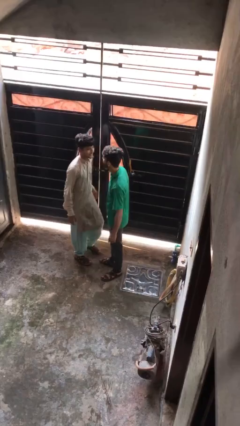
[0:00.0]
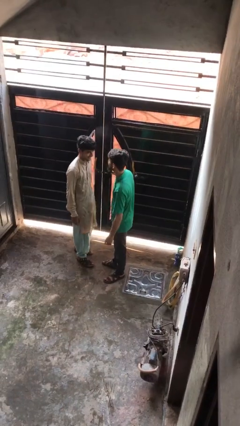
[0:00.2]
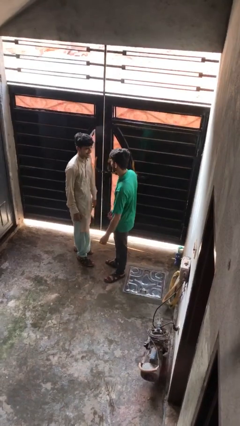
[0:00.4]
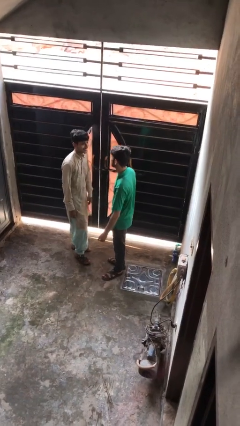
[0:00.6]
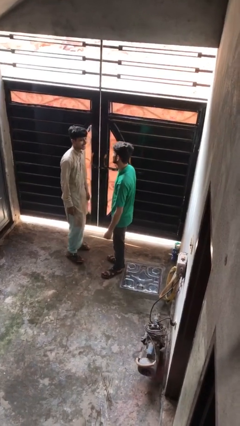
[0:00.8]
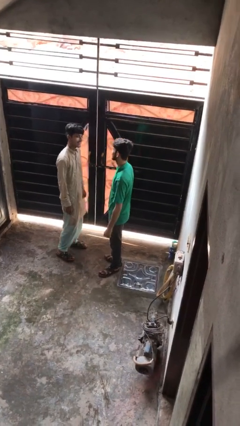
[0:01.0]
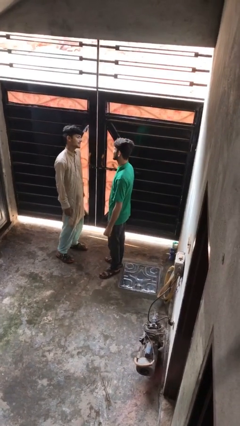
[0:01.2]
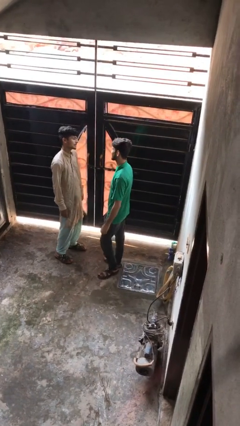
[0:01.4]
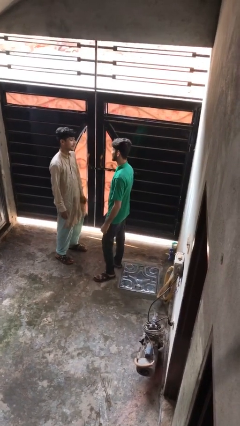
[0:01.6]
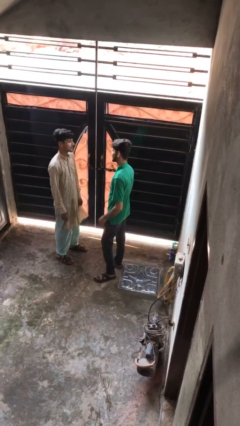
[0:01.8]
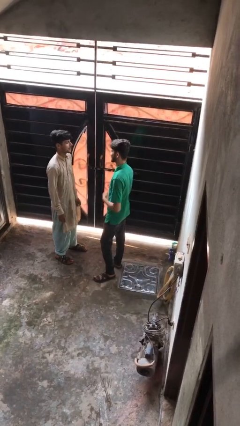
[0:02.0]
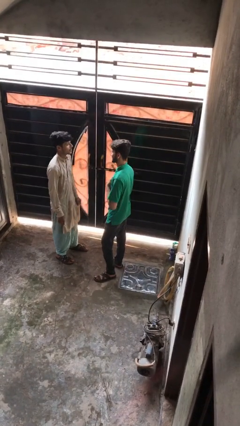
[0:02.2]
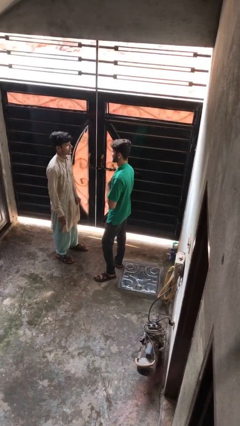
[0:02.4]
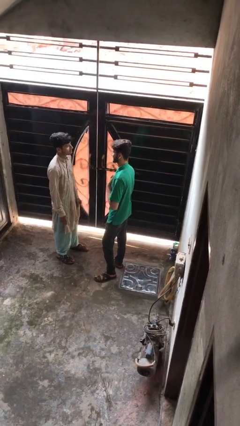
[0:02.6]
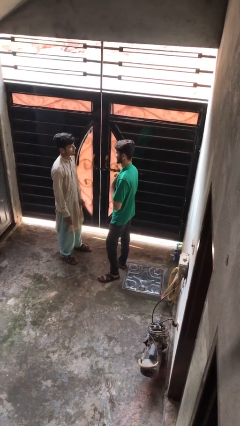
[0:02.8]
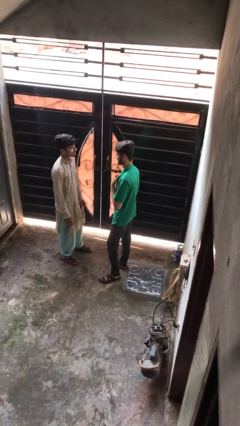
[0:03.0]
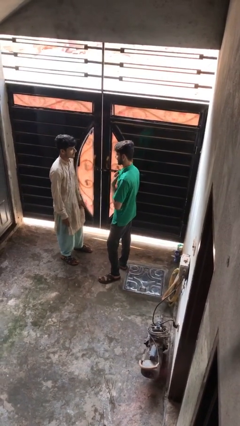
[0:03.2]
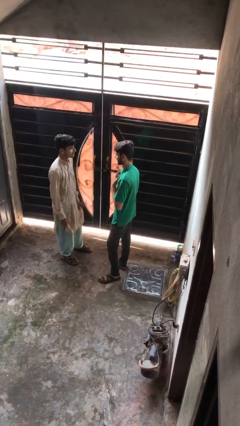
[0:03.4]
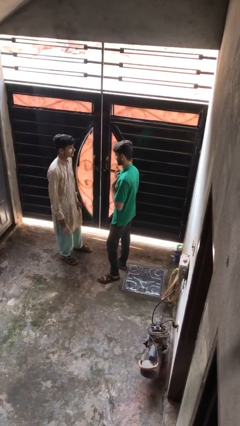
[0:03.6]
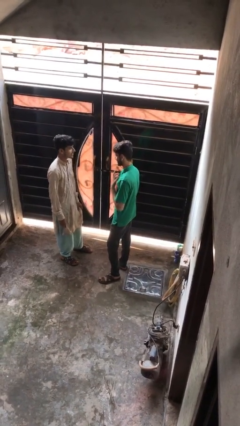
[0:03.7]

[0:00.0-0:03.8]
person talks to person

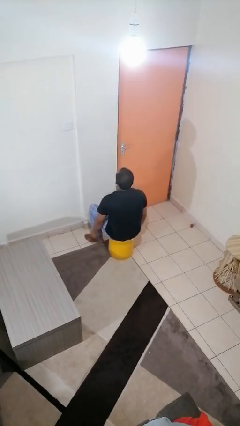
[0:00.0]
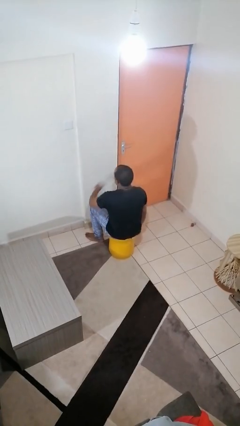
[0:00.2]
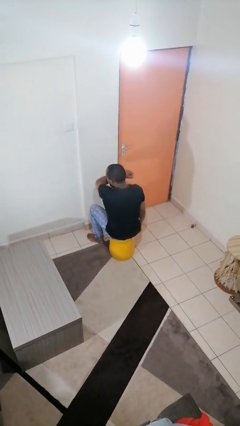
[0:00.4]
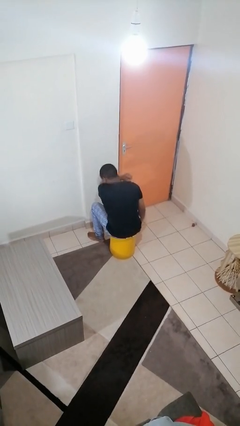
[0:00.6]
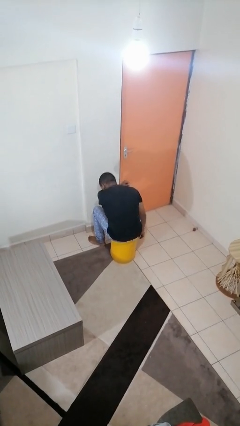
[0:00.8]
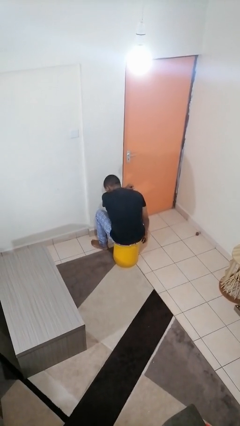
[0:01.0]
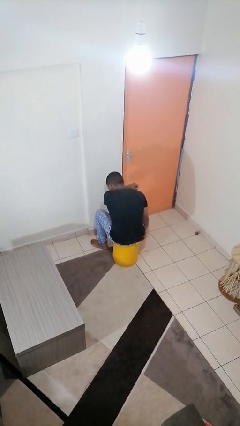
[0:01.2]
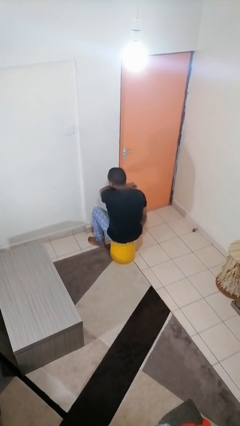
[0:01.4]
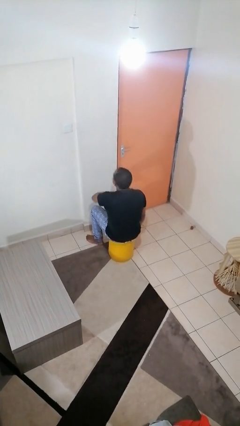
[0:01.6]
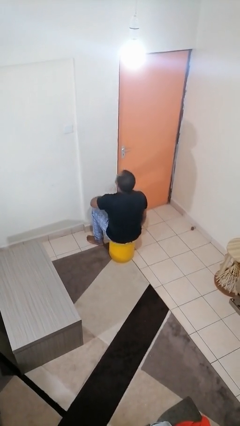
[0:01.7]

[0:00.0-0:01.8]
person sneezes into arm

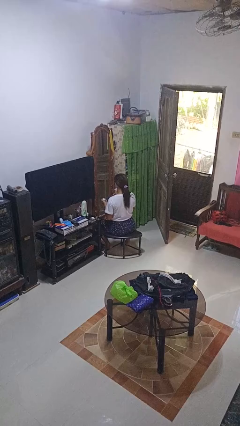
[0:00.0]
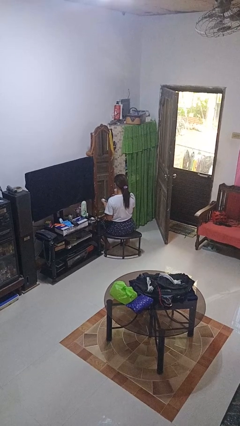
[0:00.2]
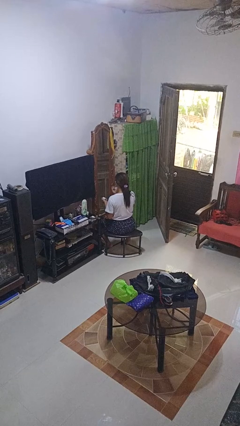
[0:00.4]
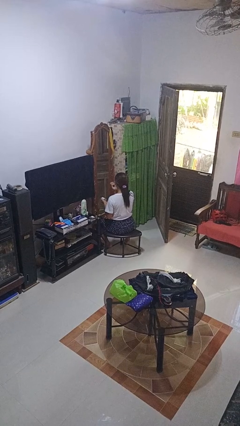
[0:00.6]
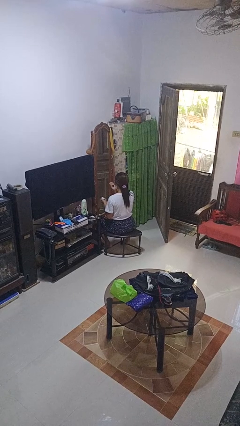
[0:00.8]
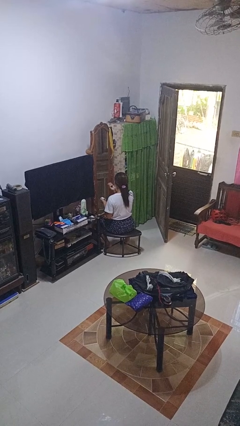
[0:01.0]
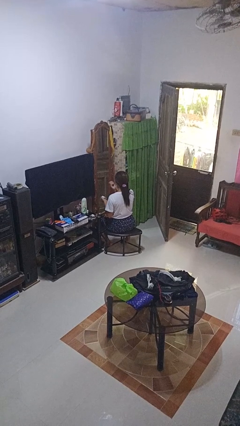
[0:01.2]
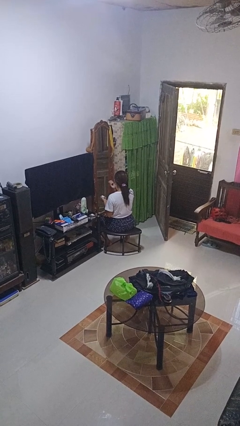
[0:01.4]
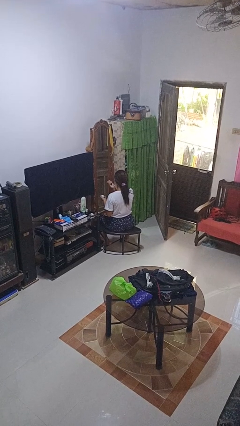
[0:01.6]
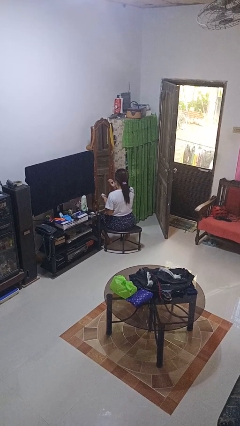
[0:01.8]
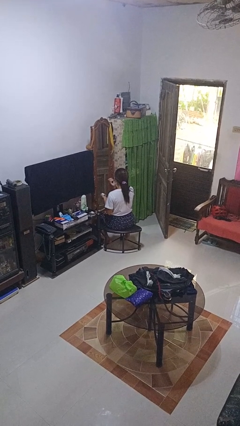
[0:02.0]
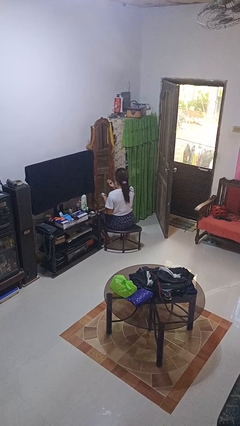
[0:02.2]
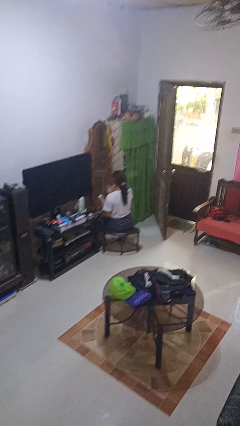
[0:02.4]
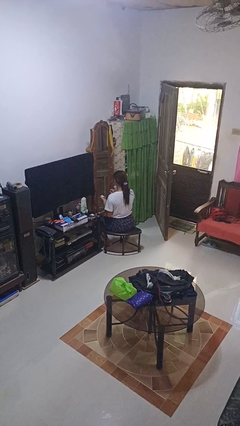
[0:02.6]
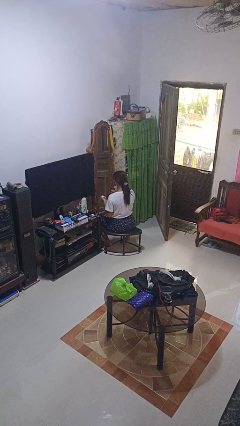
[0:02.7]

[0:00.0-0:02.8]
person applies eye makeup

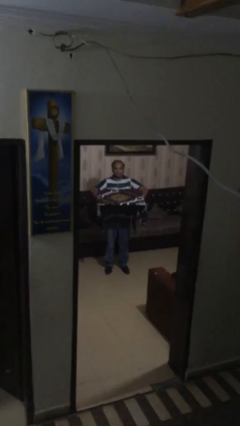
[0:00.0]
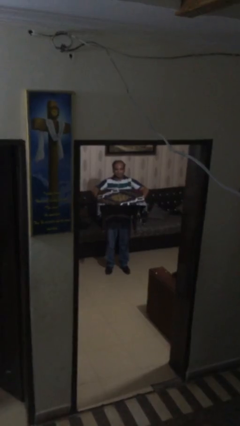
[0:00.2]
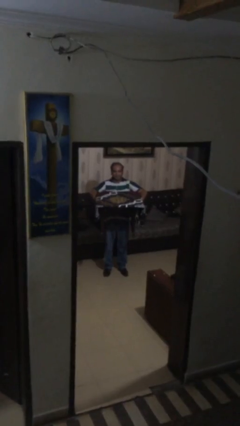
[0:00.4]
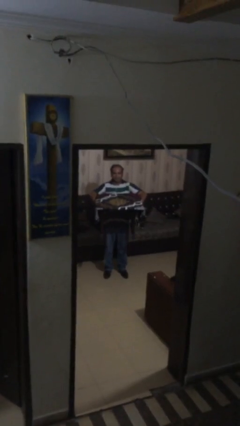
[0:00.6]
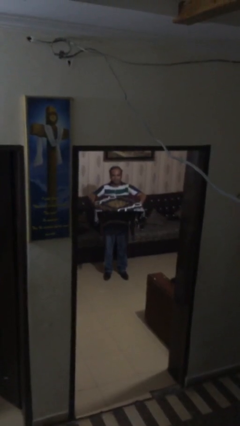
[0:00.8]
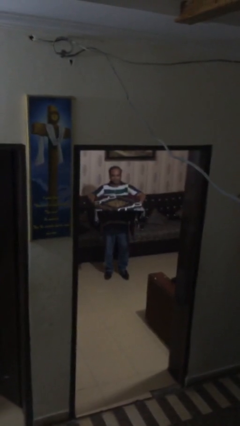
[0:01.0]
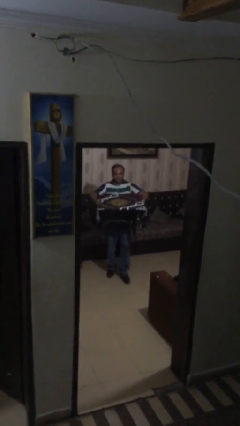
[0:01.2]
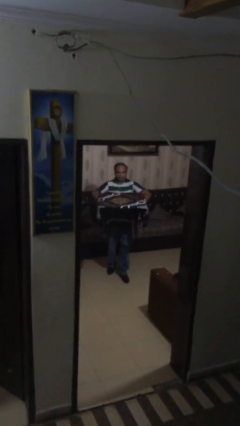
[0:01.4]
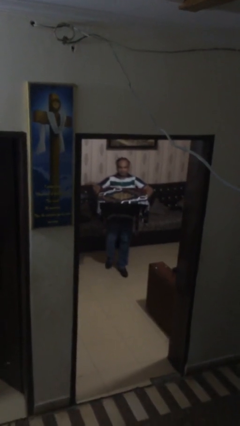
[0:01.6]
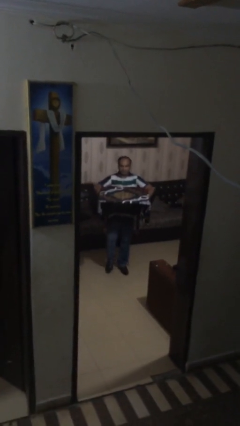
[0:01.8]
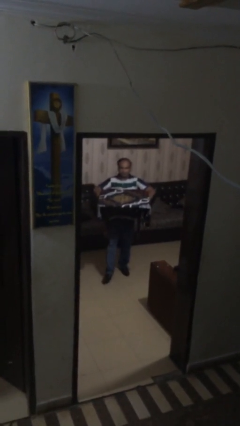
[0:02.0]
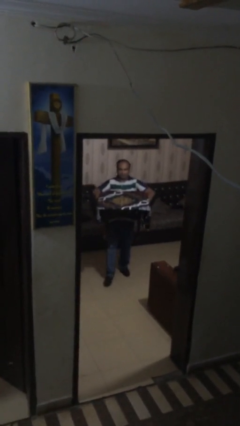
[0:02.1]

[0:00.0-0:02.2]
person carries heavy object

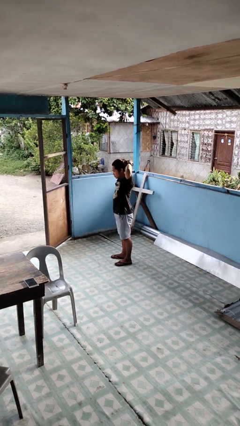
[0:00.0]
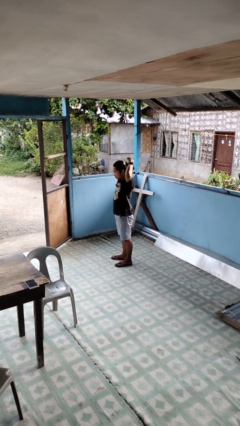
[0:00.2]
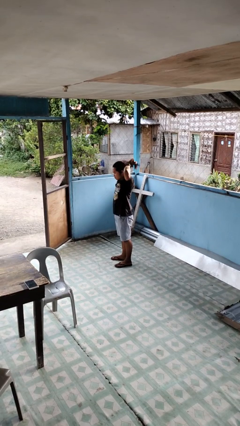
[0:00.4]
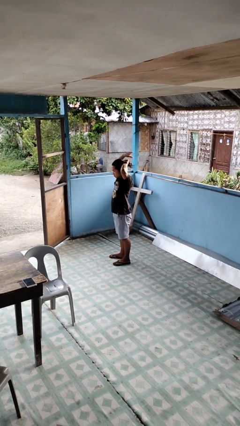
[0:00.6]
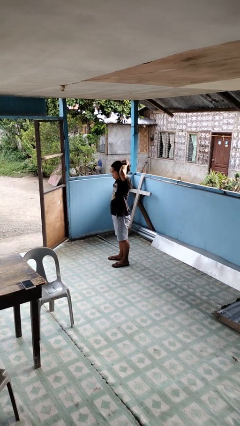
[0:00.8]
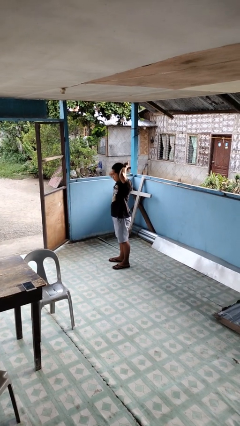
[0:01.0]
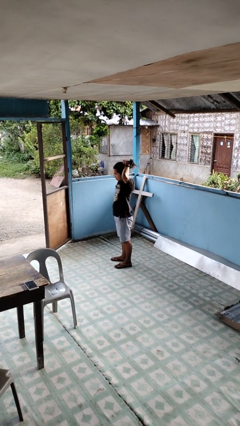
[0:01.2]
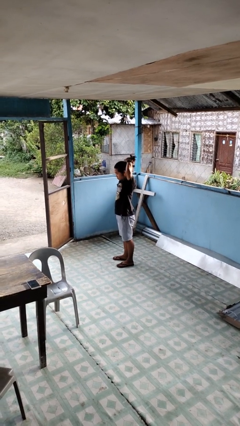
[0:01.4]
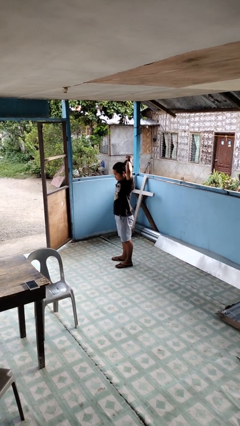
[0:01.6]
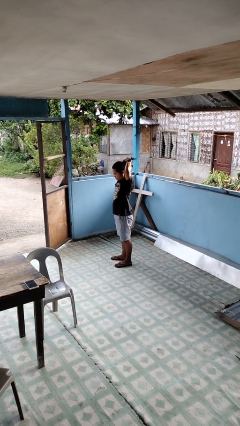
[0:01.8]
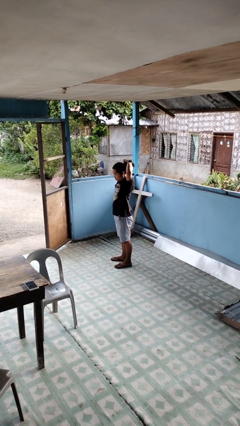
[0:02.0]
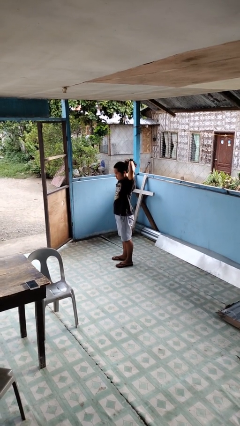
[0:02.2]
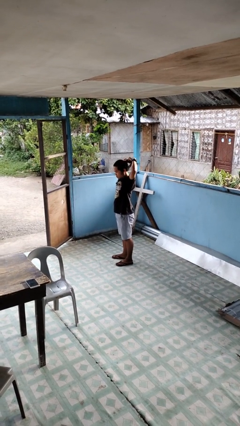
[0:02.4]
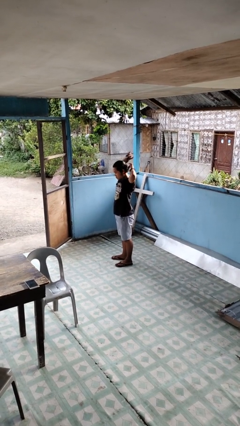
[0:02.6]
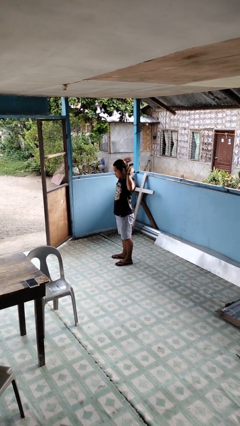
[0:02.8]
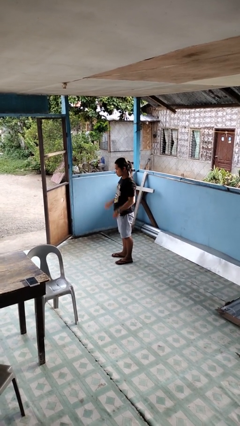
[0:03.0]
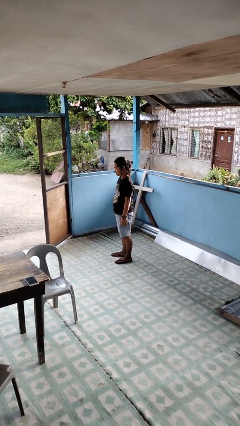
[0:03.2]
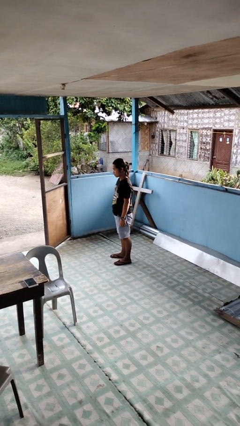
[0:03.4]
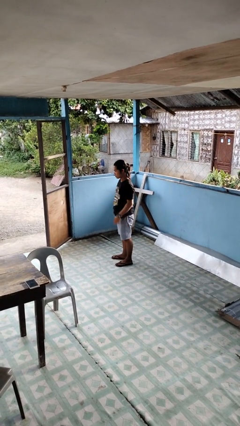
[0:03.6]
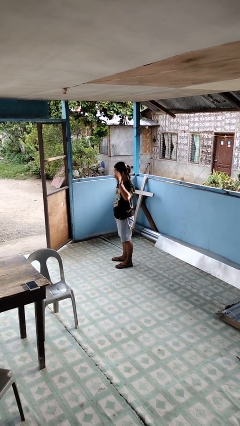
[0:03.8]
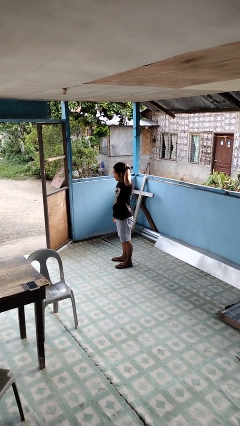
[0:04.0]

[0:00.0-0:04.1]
person puts hair in ponytail

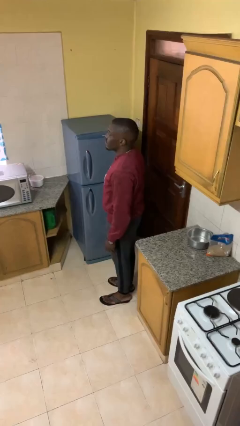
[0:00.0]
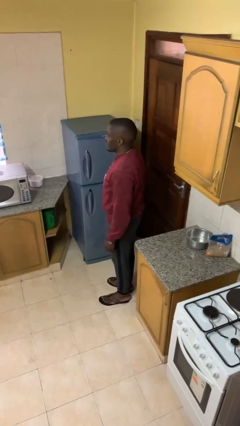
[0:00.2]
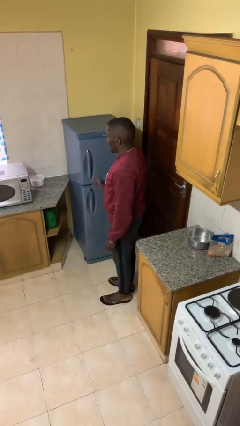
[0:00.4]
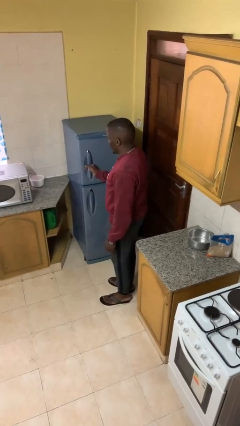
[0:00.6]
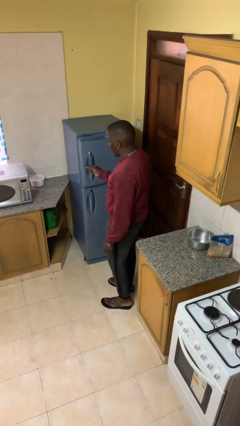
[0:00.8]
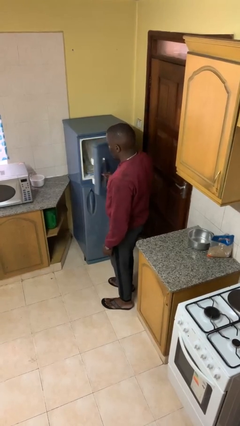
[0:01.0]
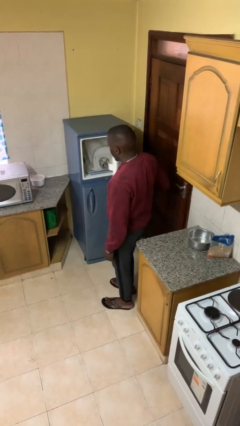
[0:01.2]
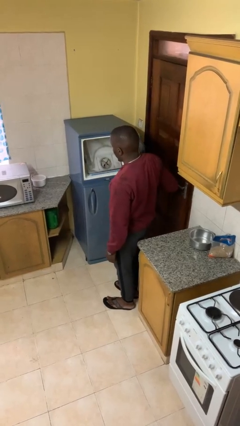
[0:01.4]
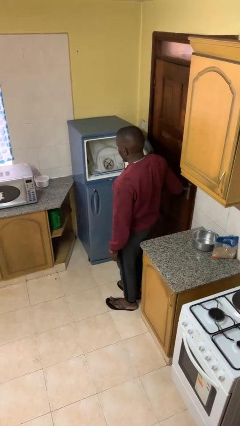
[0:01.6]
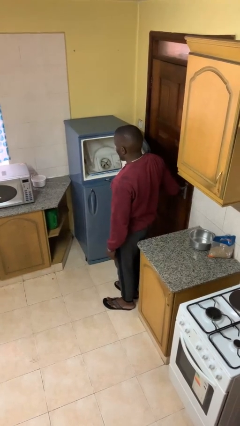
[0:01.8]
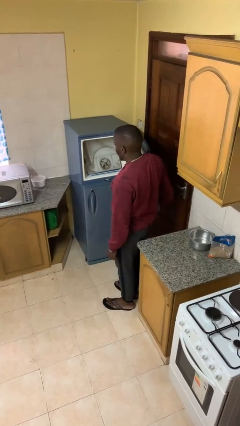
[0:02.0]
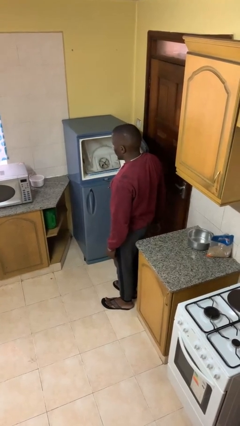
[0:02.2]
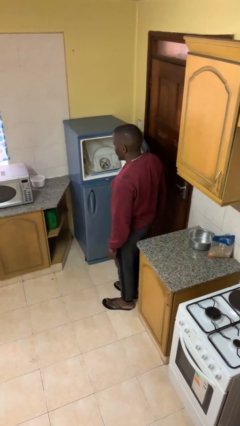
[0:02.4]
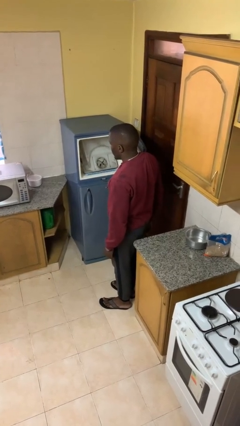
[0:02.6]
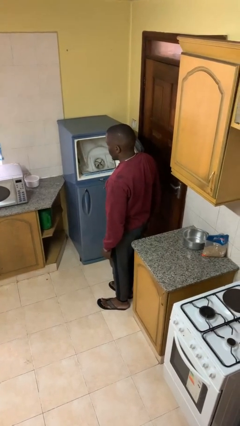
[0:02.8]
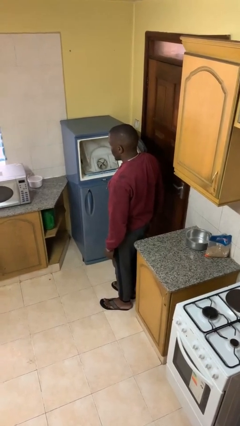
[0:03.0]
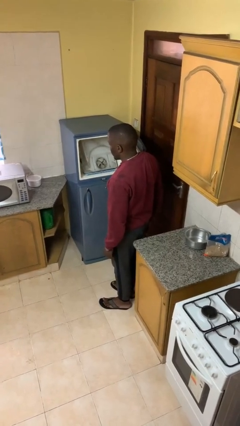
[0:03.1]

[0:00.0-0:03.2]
person opens refrigerator
